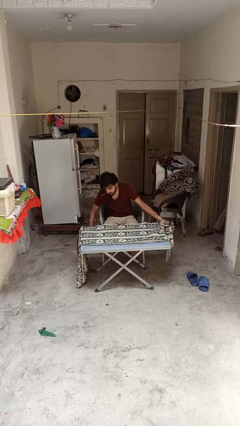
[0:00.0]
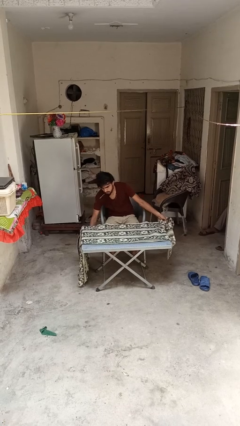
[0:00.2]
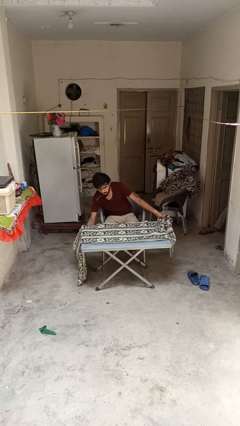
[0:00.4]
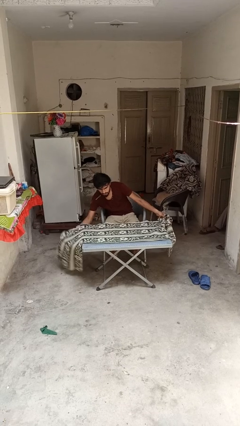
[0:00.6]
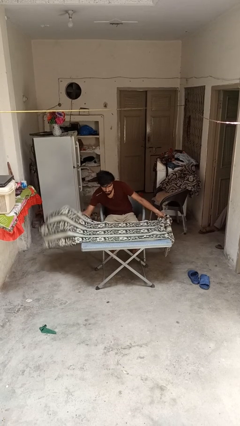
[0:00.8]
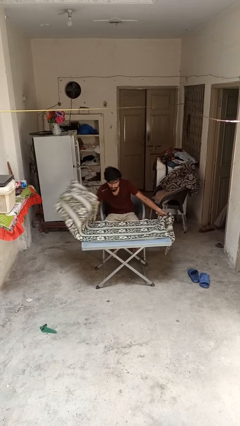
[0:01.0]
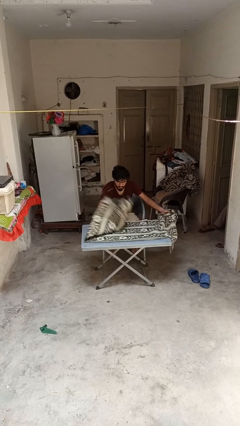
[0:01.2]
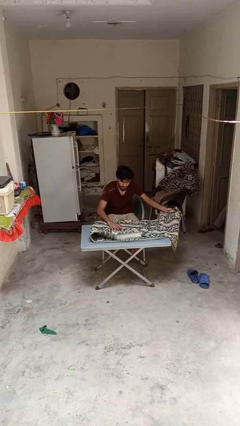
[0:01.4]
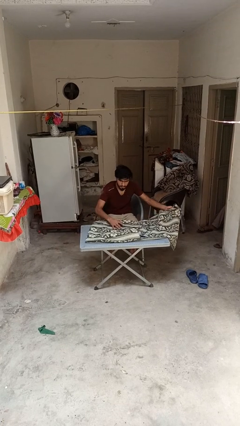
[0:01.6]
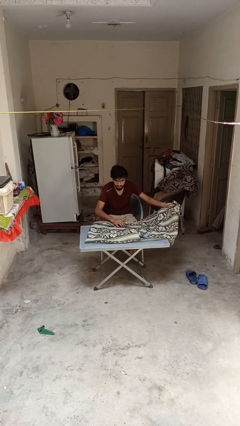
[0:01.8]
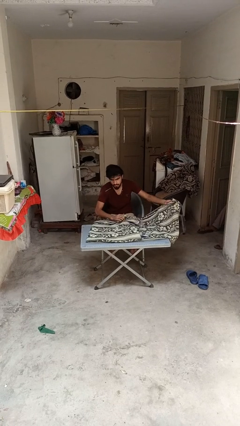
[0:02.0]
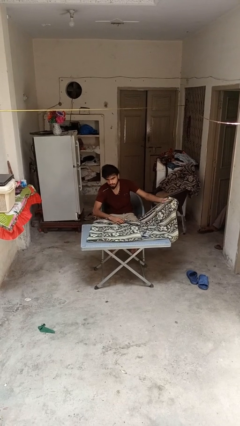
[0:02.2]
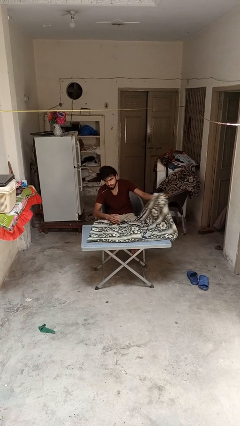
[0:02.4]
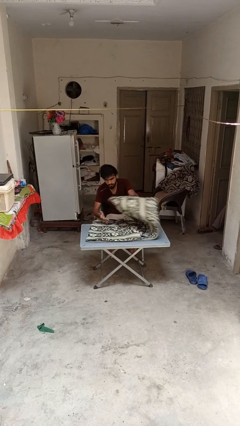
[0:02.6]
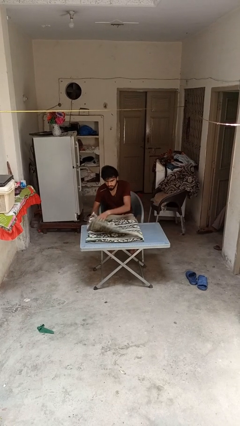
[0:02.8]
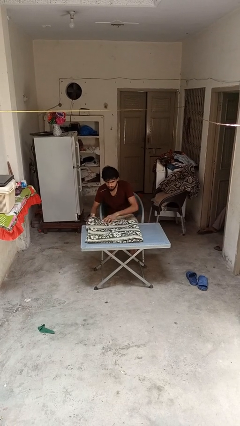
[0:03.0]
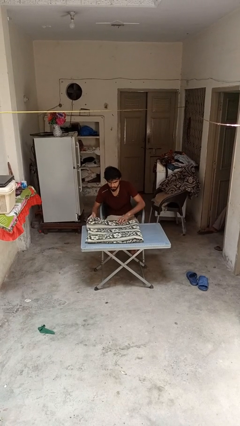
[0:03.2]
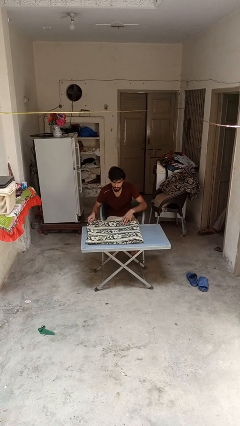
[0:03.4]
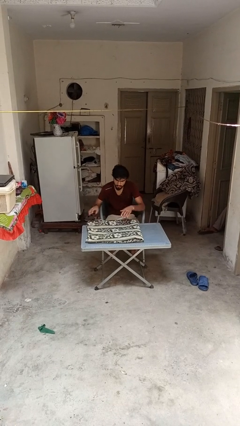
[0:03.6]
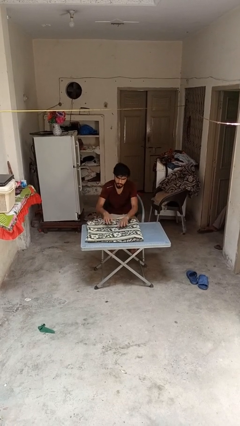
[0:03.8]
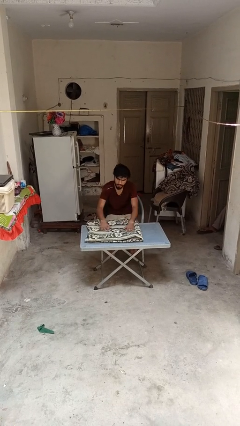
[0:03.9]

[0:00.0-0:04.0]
person folds tablecloth

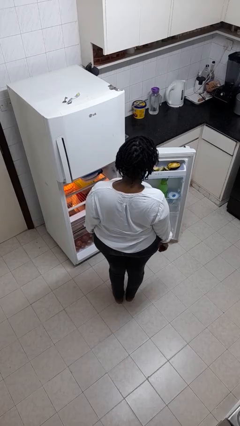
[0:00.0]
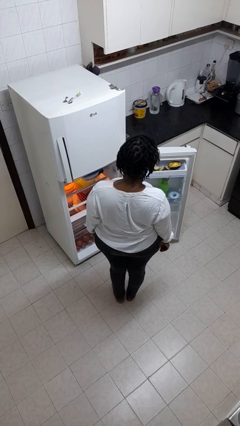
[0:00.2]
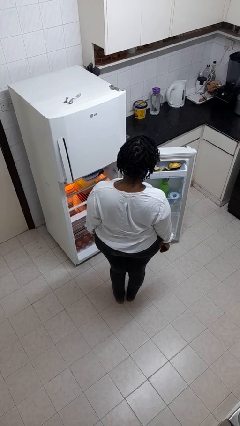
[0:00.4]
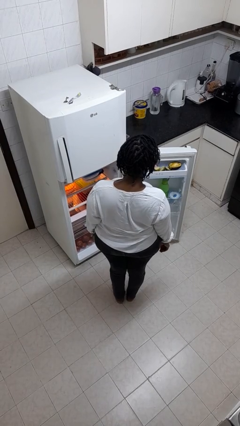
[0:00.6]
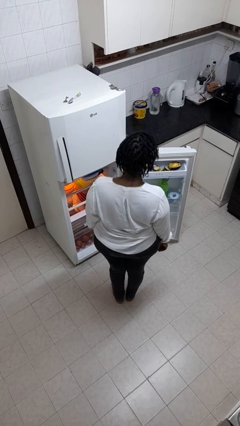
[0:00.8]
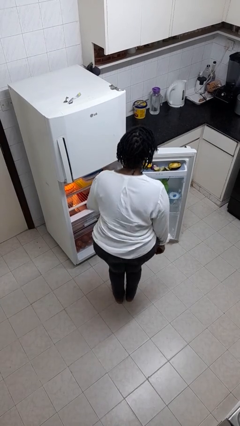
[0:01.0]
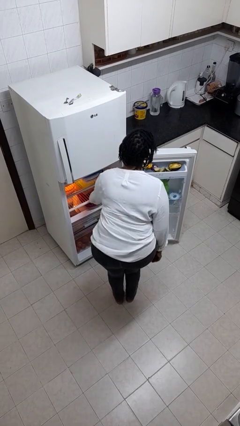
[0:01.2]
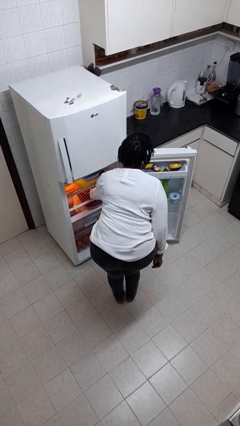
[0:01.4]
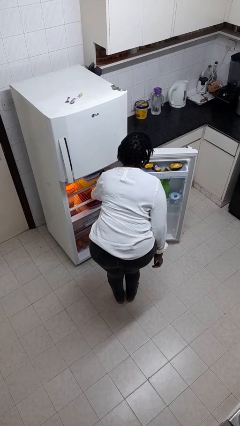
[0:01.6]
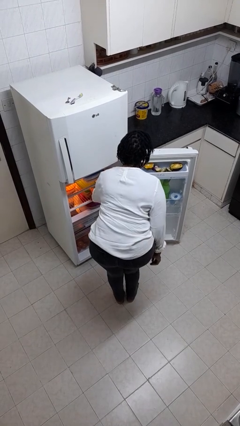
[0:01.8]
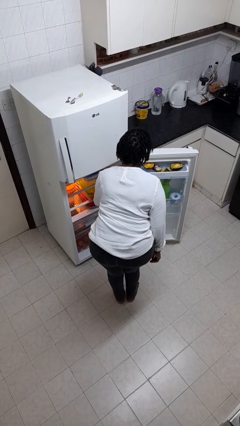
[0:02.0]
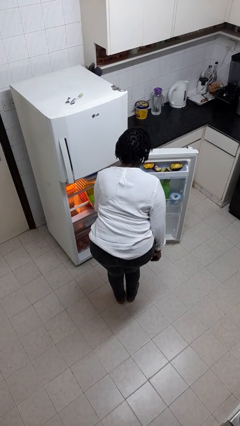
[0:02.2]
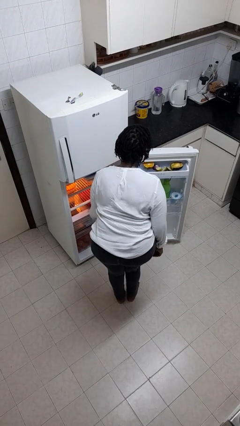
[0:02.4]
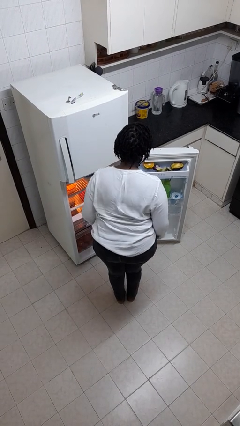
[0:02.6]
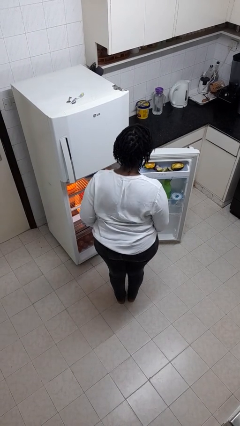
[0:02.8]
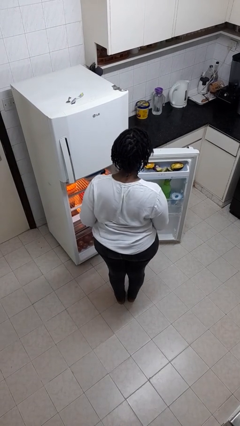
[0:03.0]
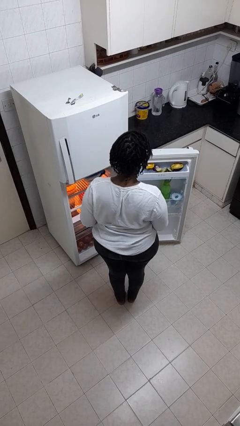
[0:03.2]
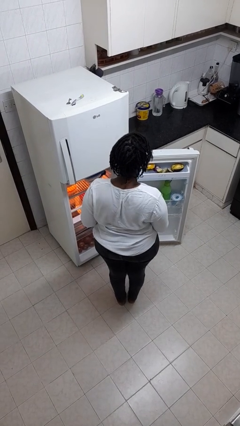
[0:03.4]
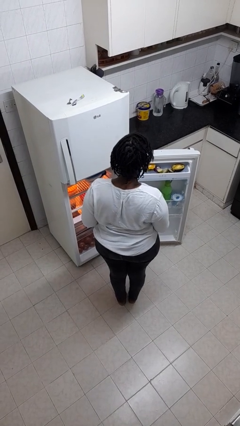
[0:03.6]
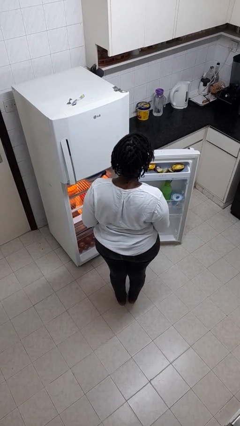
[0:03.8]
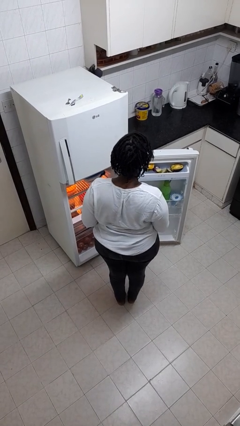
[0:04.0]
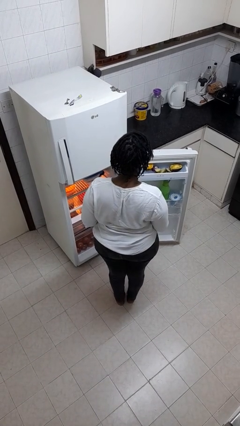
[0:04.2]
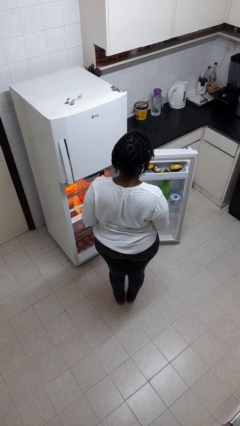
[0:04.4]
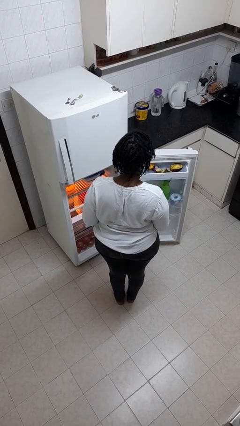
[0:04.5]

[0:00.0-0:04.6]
person takes object from refrigerator

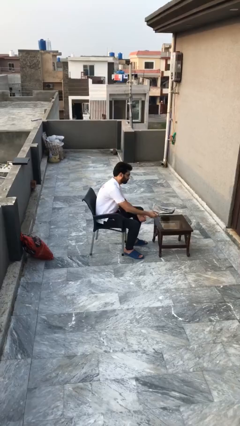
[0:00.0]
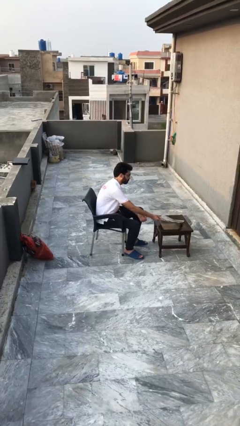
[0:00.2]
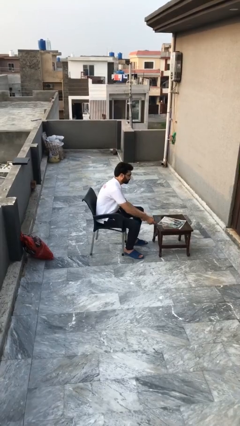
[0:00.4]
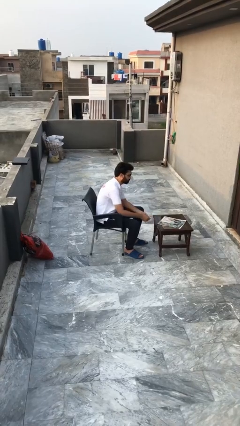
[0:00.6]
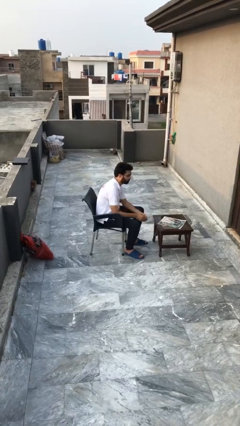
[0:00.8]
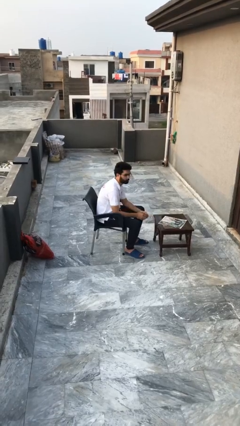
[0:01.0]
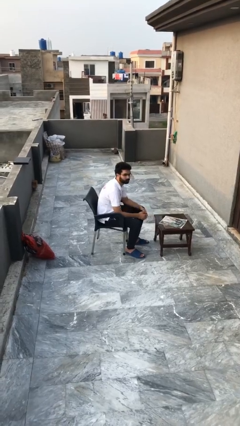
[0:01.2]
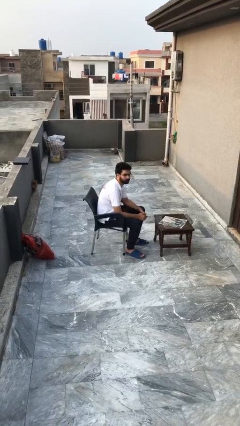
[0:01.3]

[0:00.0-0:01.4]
person puts down object on table

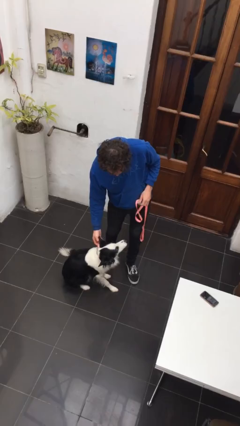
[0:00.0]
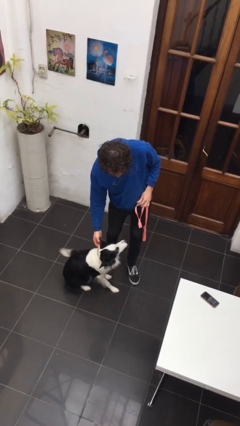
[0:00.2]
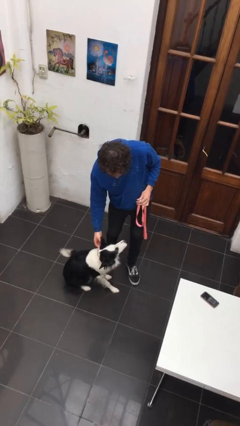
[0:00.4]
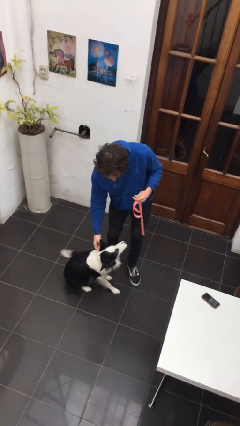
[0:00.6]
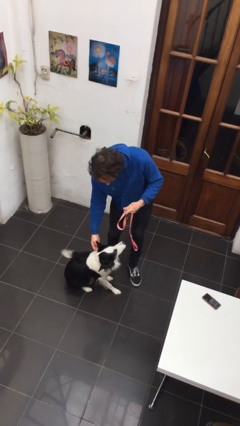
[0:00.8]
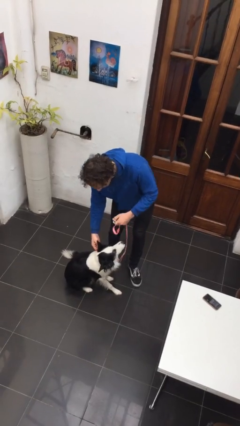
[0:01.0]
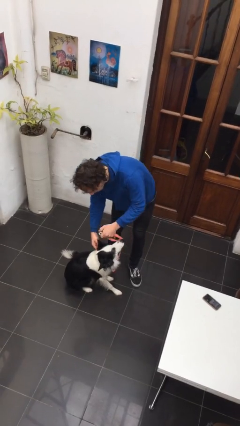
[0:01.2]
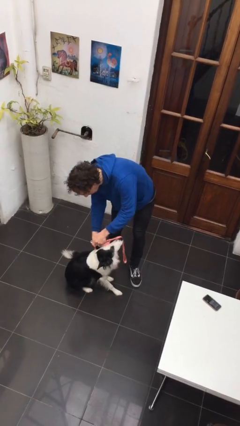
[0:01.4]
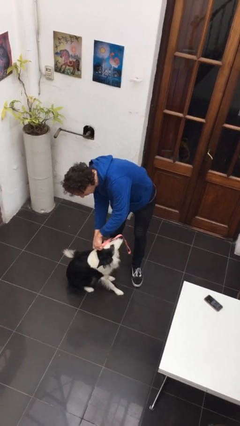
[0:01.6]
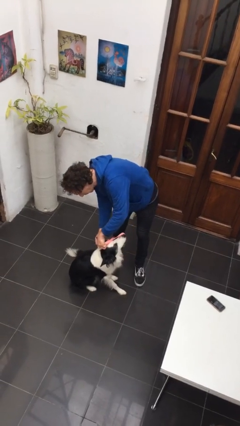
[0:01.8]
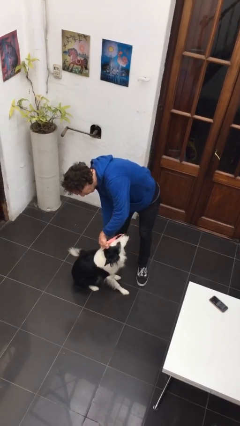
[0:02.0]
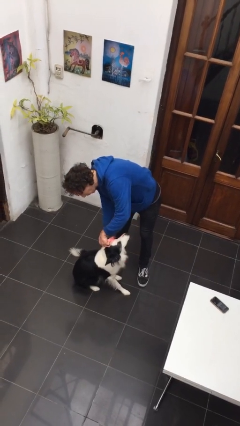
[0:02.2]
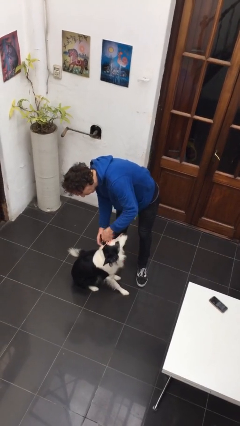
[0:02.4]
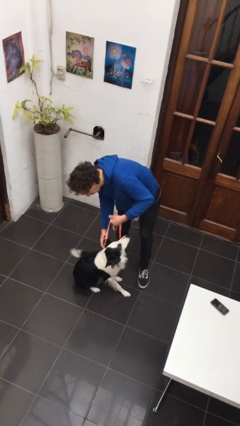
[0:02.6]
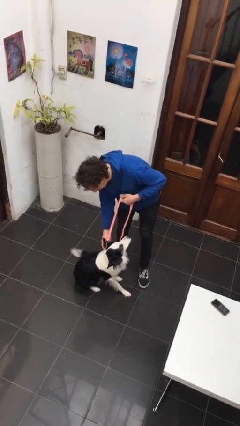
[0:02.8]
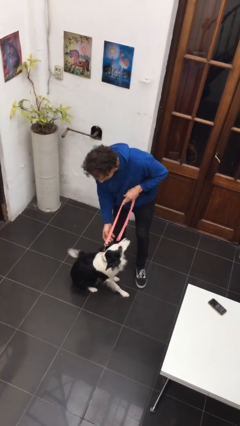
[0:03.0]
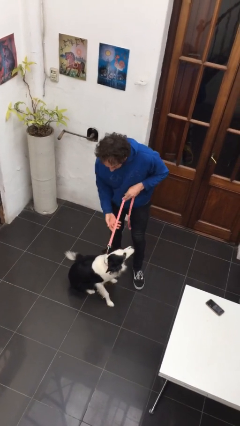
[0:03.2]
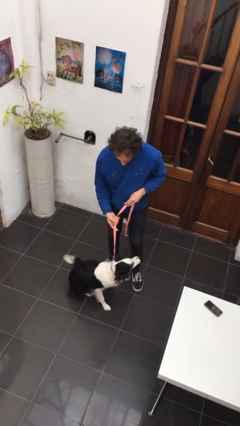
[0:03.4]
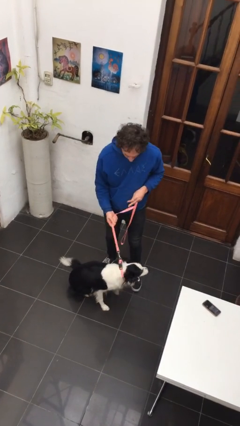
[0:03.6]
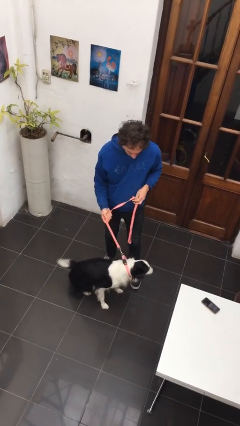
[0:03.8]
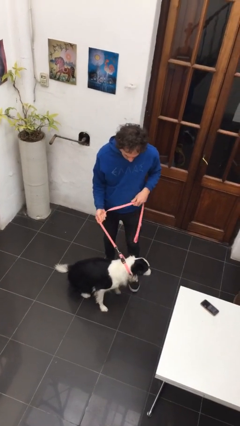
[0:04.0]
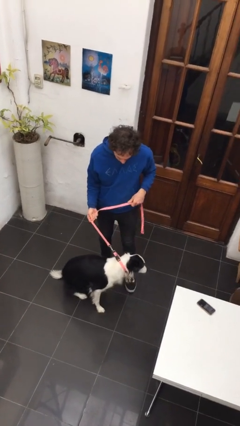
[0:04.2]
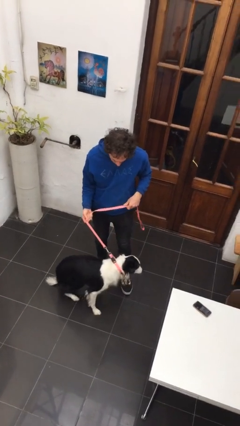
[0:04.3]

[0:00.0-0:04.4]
person attaches leash to dog

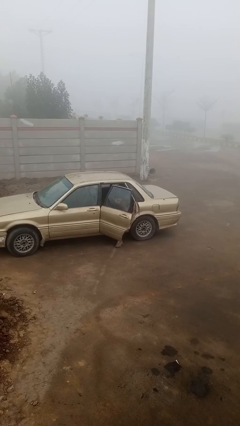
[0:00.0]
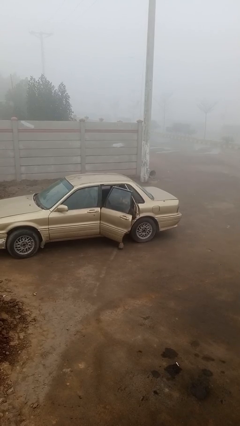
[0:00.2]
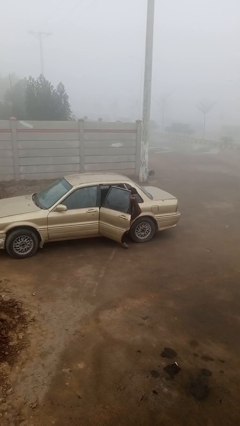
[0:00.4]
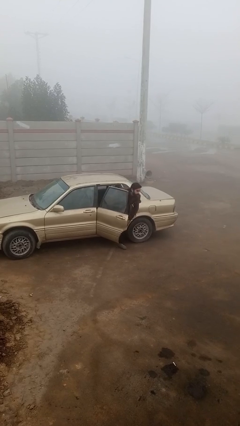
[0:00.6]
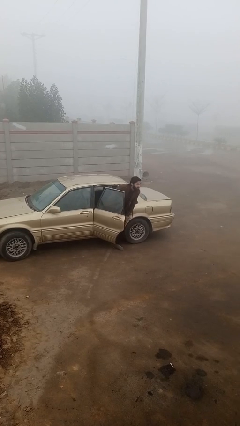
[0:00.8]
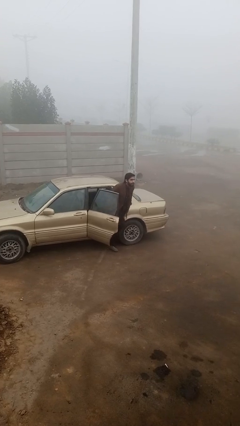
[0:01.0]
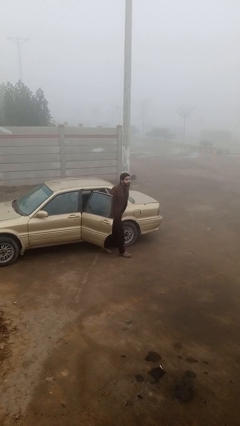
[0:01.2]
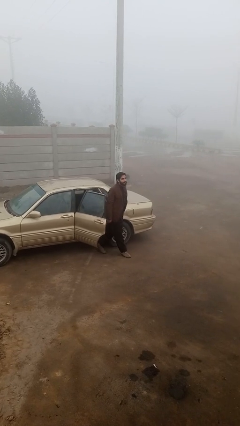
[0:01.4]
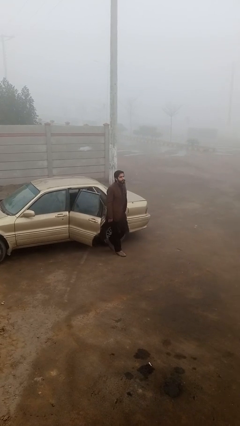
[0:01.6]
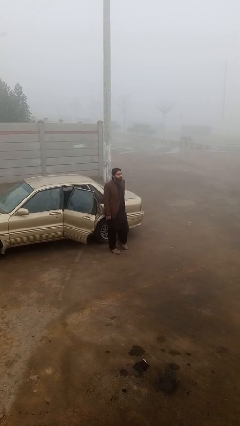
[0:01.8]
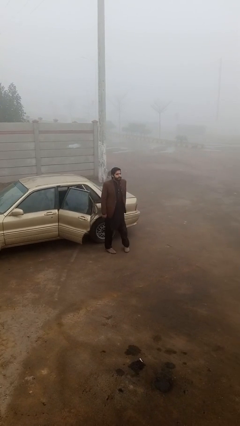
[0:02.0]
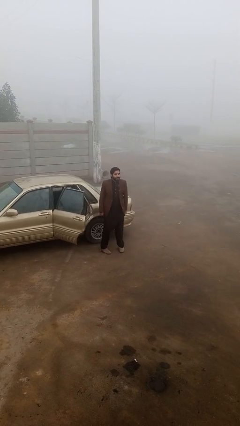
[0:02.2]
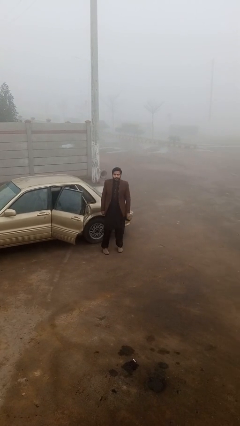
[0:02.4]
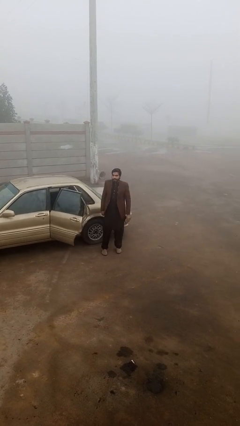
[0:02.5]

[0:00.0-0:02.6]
person exits car

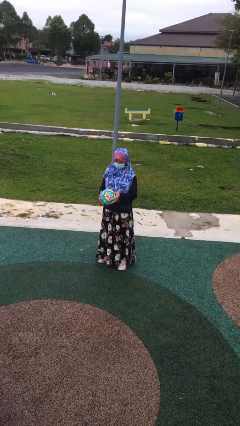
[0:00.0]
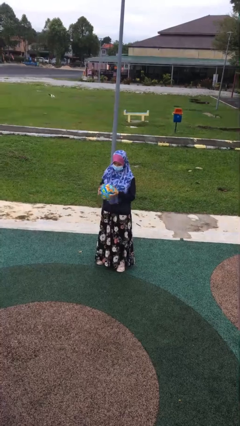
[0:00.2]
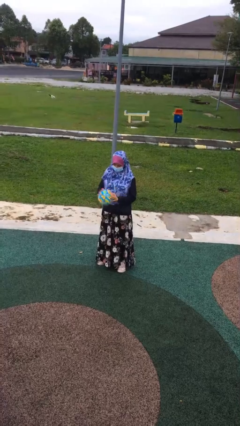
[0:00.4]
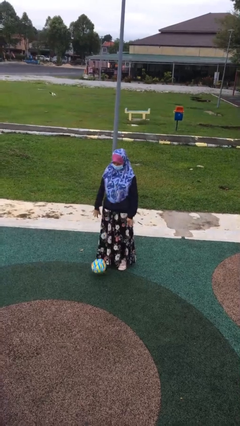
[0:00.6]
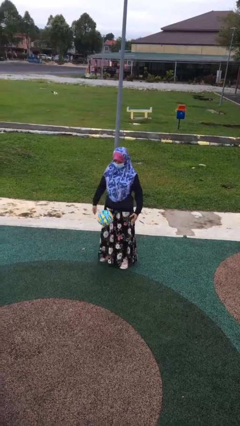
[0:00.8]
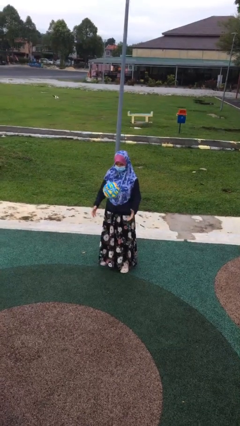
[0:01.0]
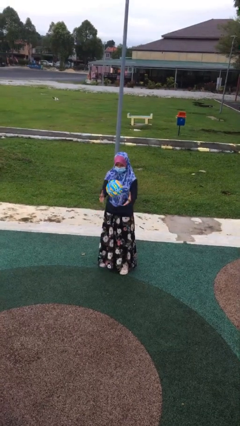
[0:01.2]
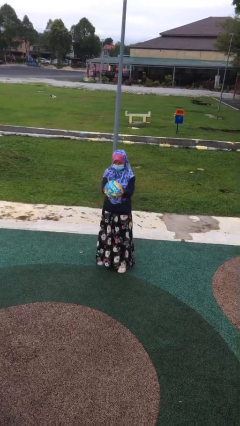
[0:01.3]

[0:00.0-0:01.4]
person bounces ball on floor
